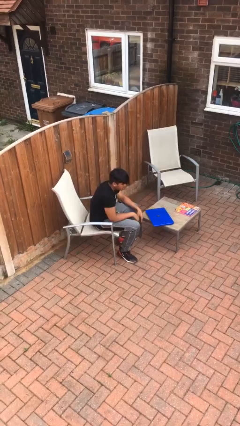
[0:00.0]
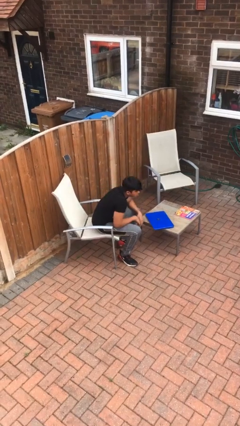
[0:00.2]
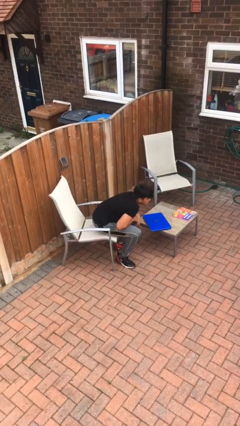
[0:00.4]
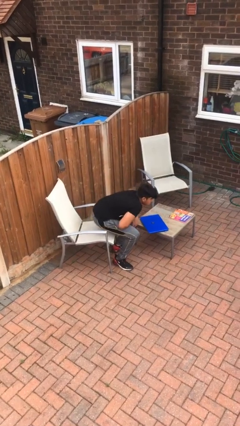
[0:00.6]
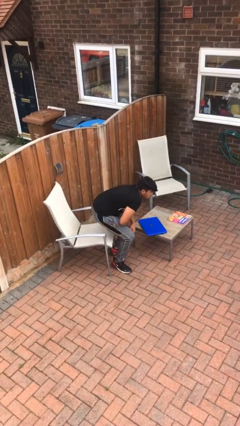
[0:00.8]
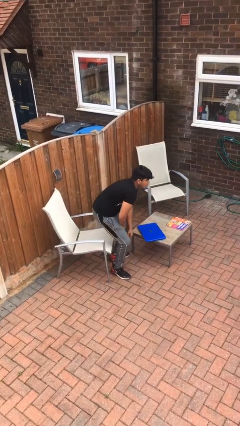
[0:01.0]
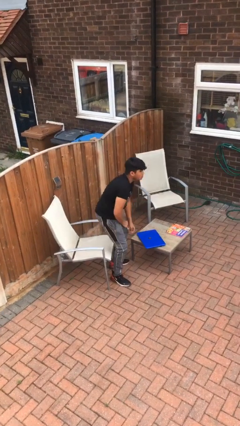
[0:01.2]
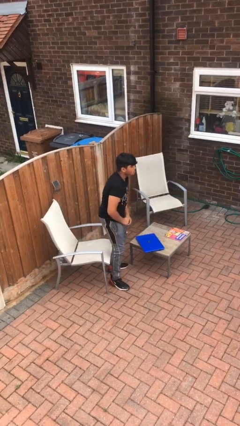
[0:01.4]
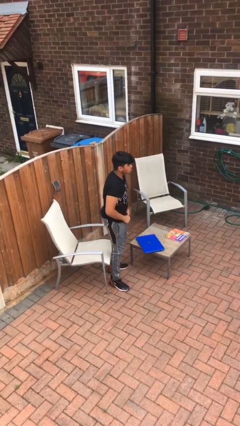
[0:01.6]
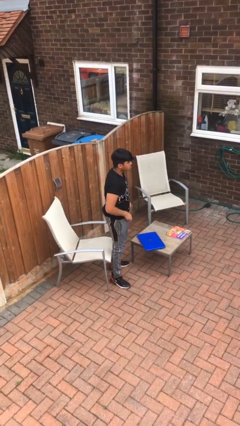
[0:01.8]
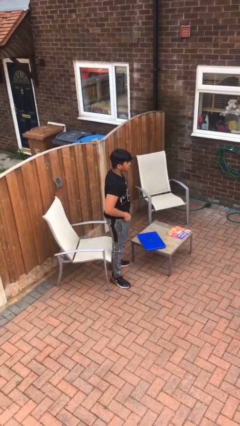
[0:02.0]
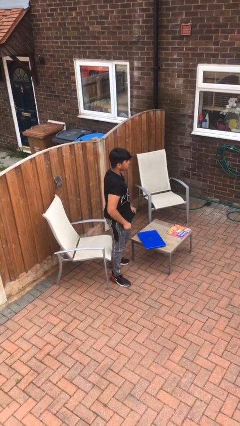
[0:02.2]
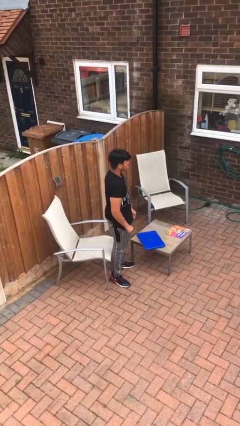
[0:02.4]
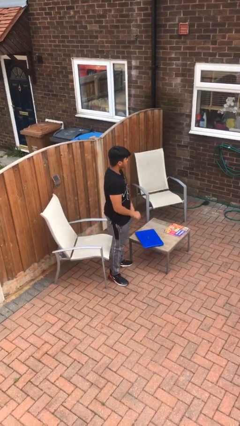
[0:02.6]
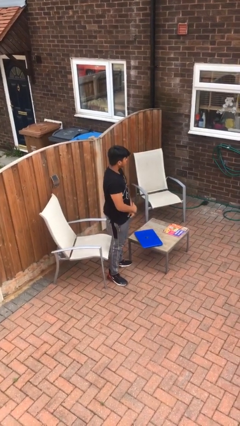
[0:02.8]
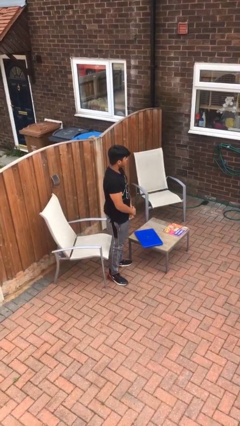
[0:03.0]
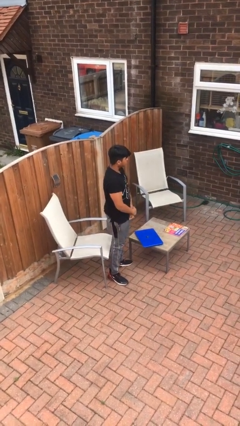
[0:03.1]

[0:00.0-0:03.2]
person stands up

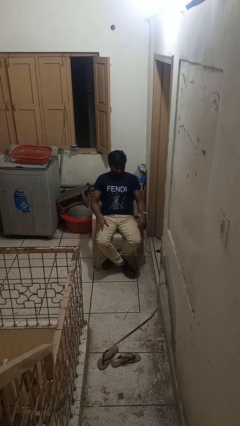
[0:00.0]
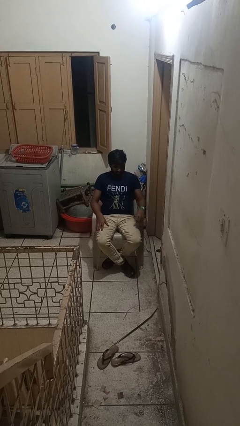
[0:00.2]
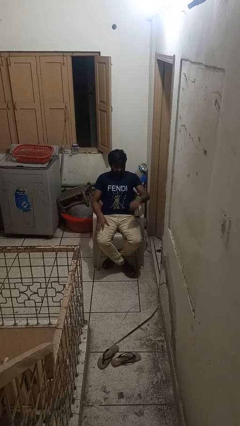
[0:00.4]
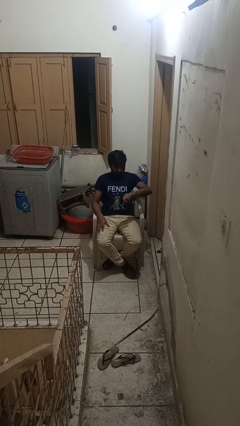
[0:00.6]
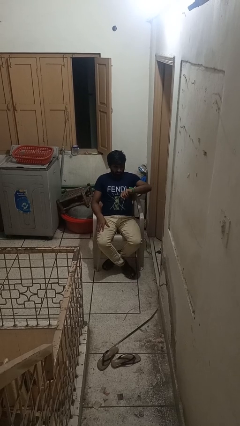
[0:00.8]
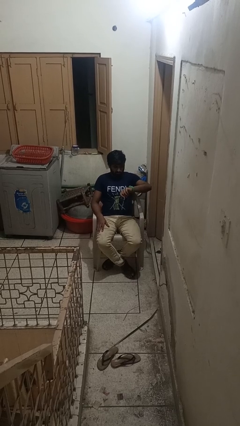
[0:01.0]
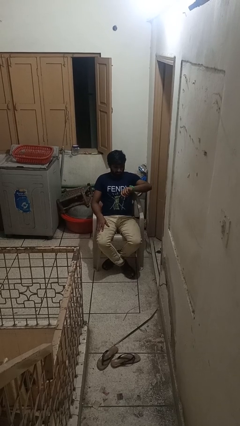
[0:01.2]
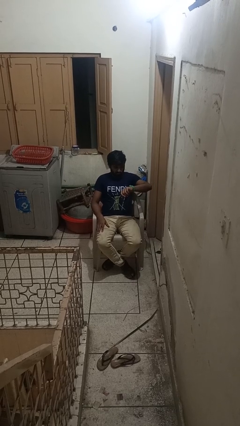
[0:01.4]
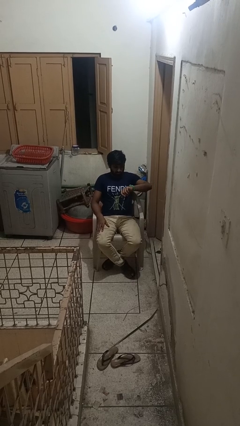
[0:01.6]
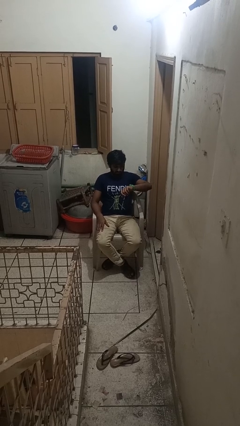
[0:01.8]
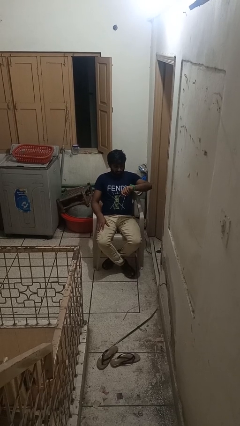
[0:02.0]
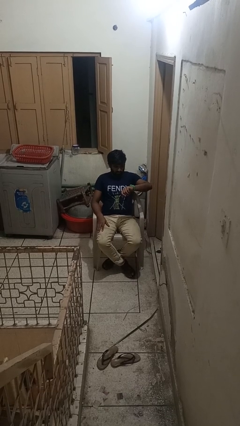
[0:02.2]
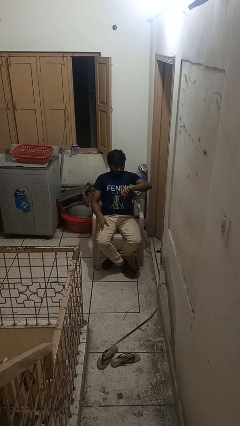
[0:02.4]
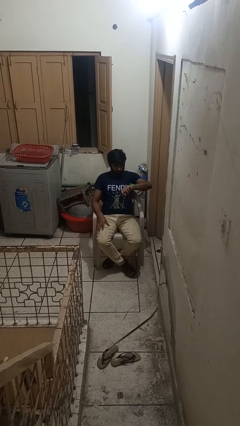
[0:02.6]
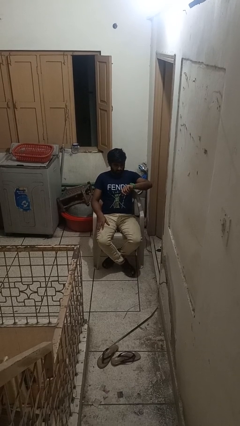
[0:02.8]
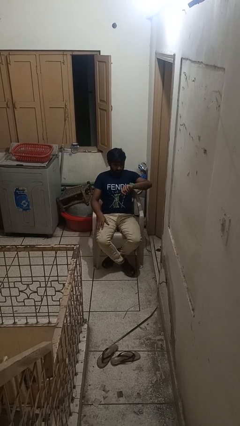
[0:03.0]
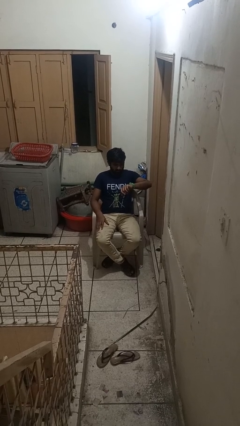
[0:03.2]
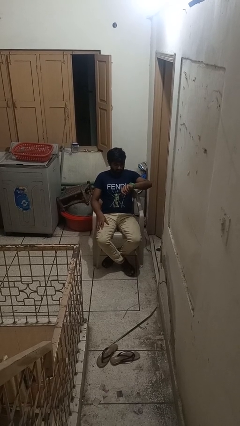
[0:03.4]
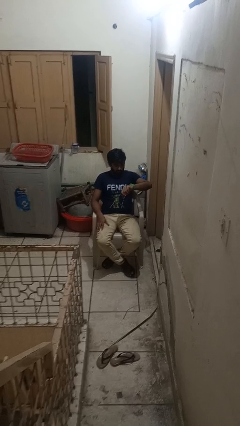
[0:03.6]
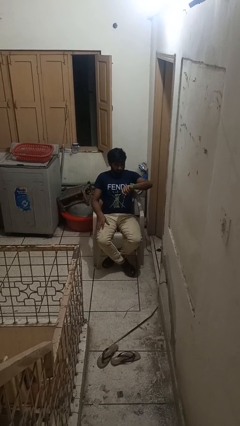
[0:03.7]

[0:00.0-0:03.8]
person looks at wristwatch

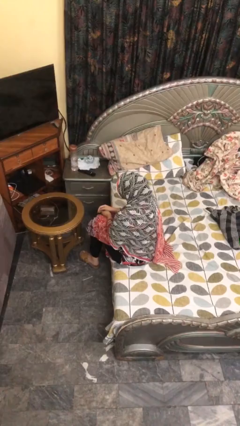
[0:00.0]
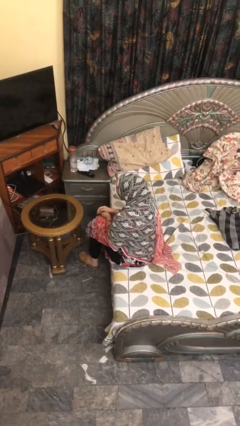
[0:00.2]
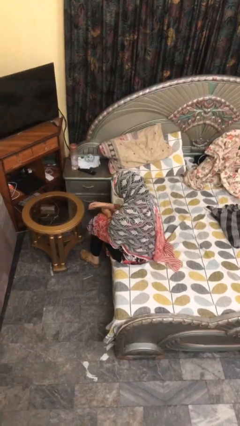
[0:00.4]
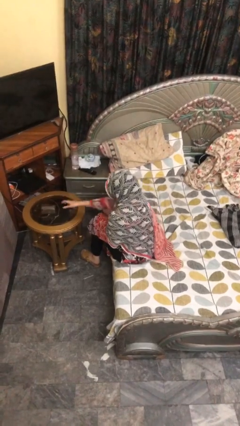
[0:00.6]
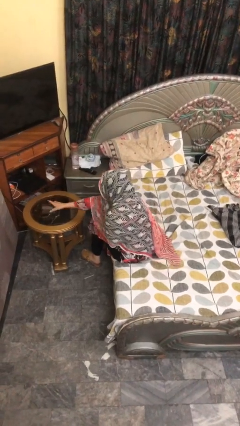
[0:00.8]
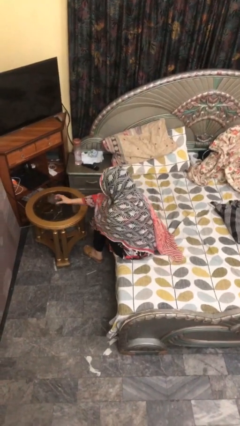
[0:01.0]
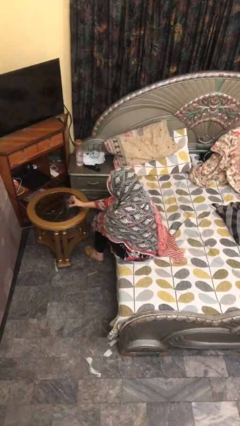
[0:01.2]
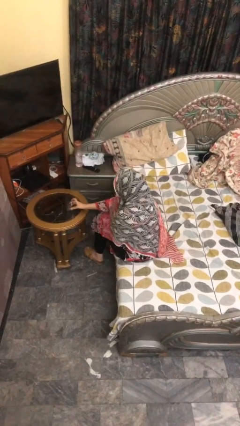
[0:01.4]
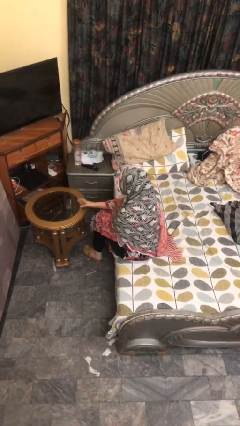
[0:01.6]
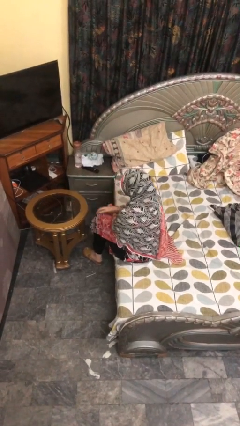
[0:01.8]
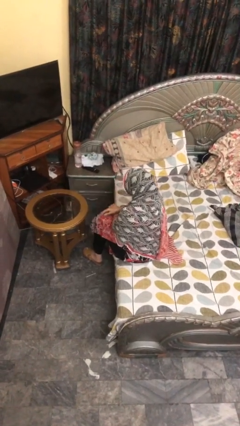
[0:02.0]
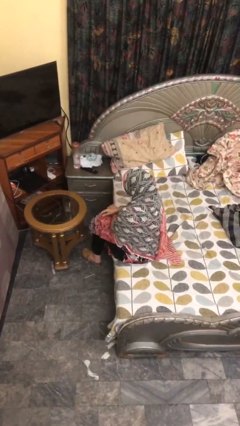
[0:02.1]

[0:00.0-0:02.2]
person sets upright glass

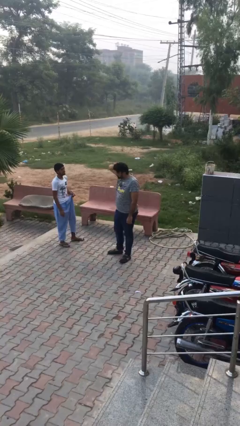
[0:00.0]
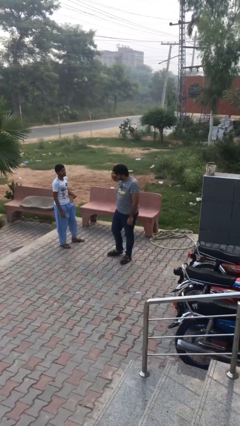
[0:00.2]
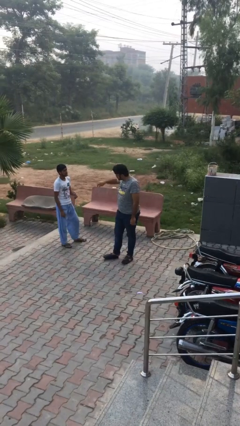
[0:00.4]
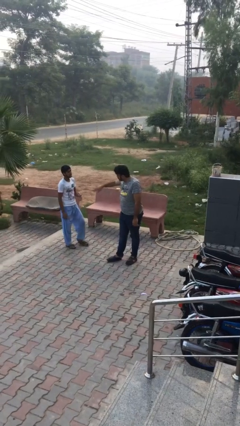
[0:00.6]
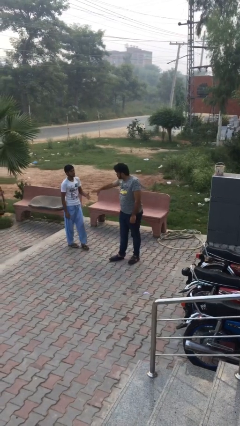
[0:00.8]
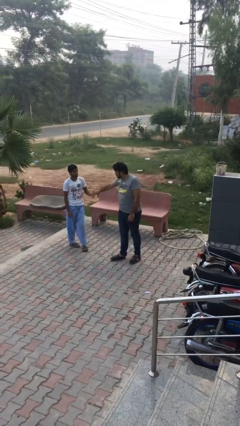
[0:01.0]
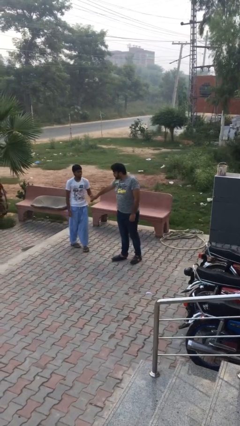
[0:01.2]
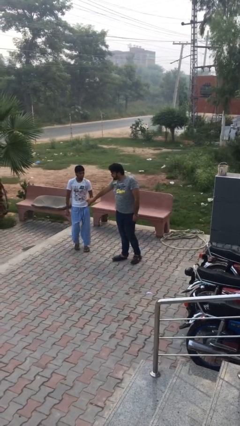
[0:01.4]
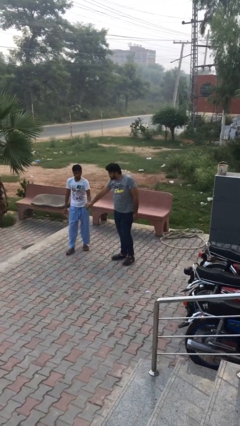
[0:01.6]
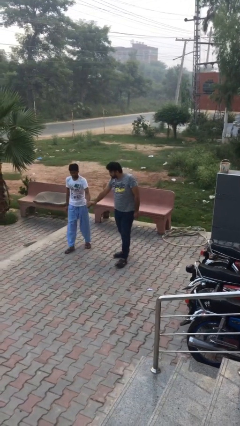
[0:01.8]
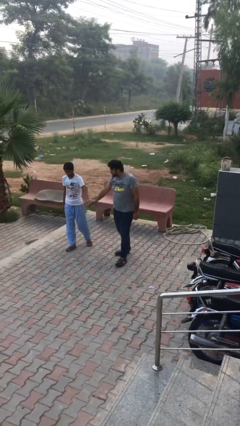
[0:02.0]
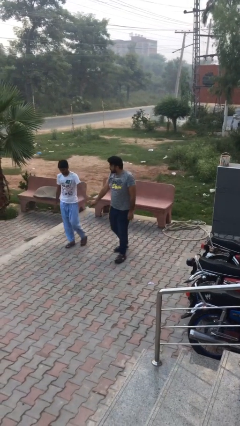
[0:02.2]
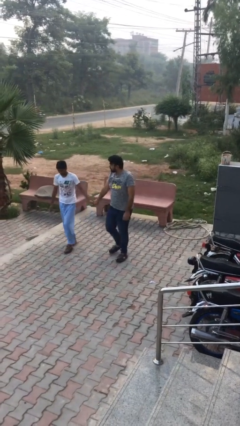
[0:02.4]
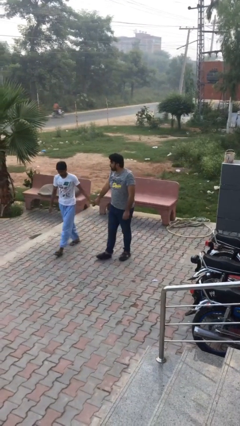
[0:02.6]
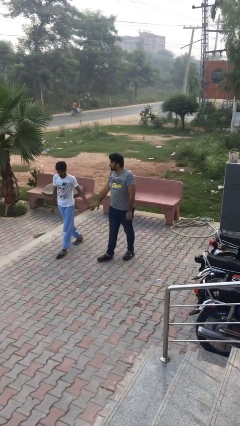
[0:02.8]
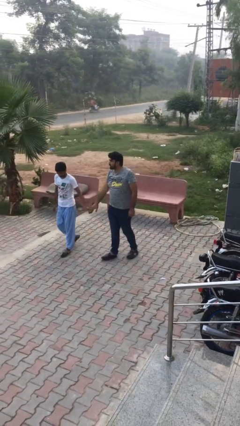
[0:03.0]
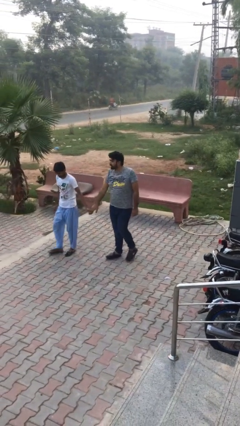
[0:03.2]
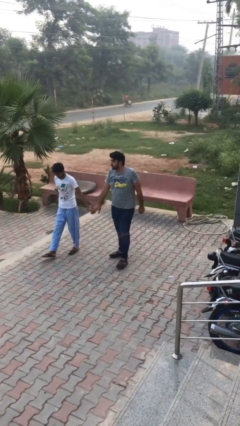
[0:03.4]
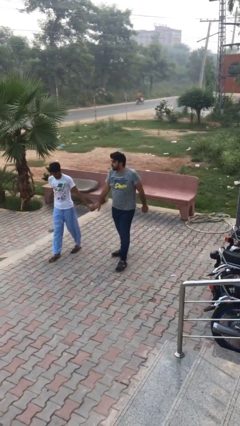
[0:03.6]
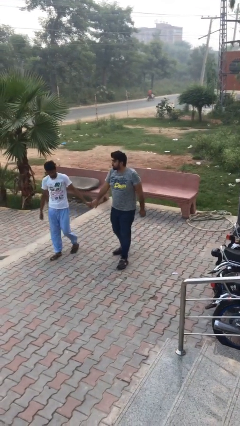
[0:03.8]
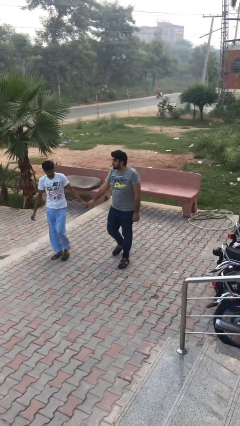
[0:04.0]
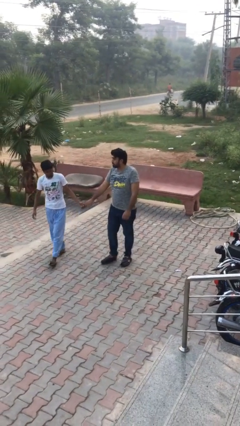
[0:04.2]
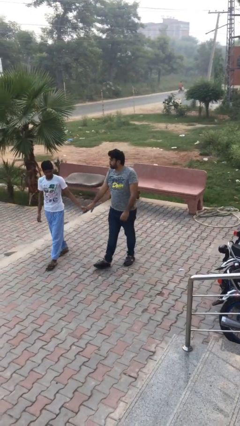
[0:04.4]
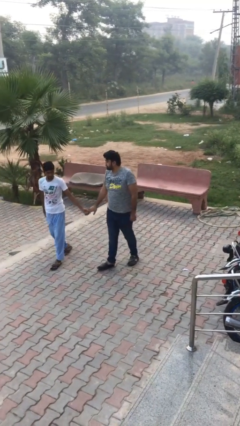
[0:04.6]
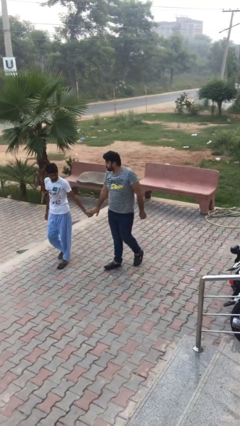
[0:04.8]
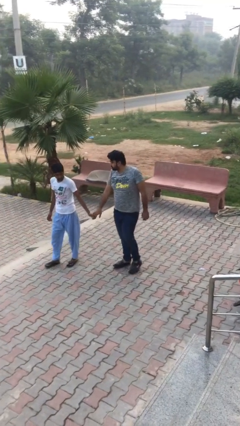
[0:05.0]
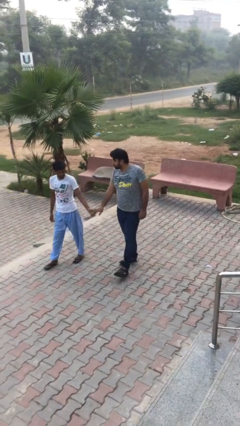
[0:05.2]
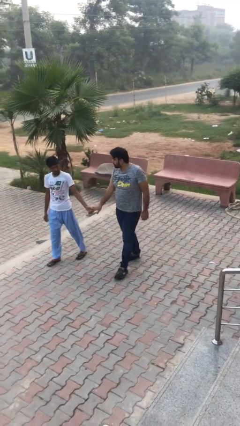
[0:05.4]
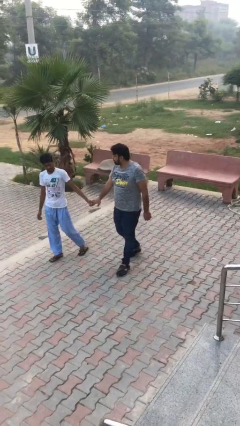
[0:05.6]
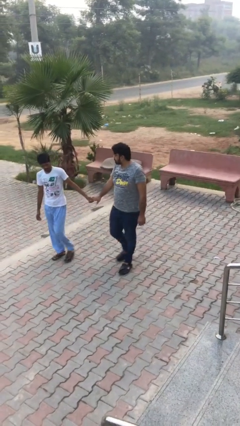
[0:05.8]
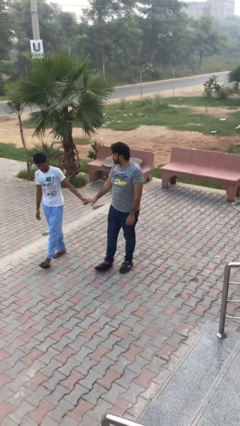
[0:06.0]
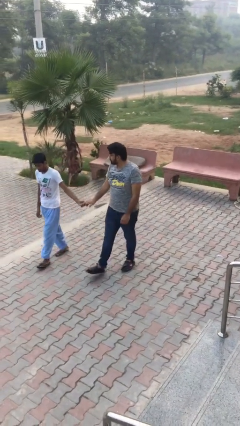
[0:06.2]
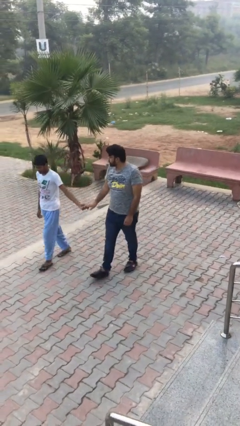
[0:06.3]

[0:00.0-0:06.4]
person holds hand

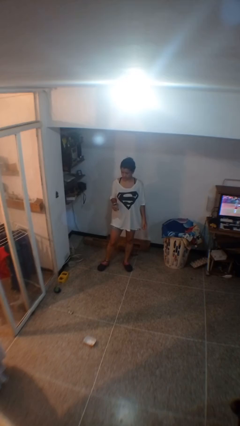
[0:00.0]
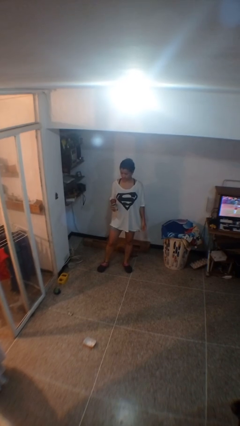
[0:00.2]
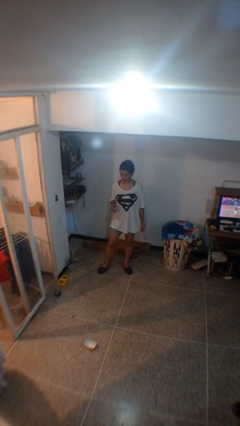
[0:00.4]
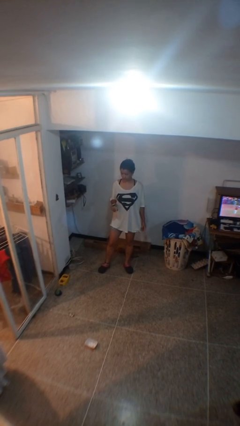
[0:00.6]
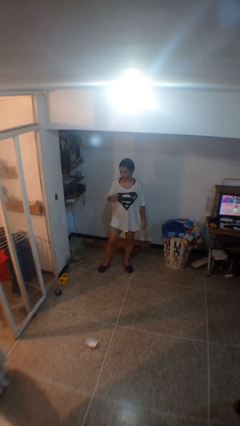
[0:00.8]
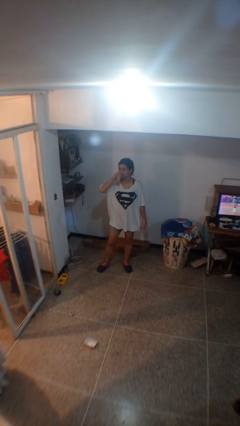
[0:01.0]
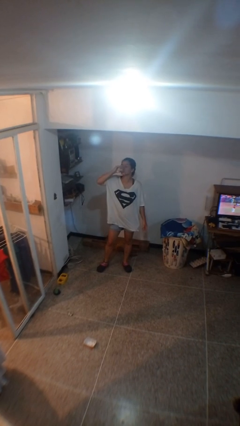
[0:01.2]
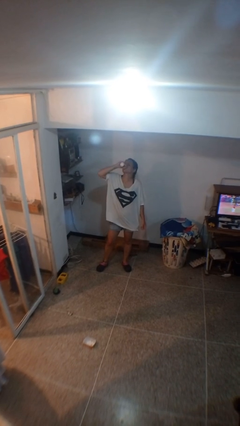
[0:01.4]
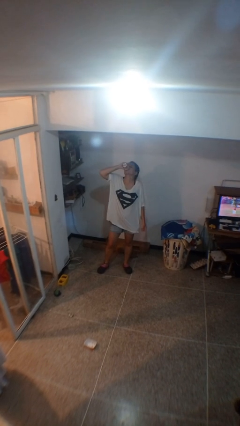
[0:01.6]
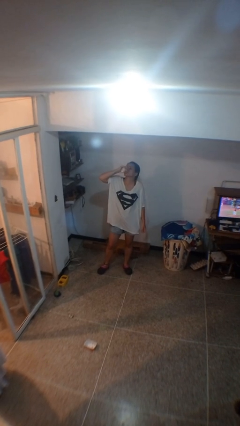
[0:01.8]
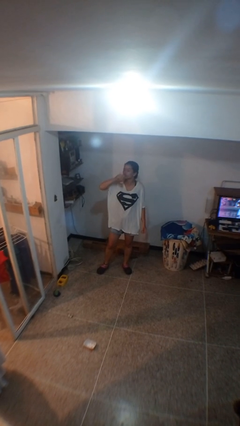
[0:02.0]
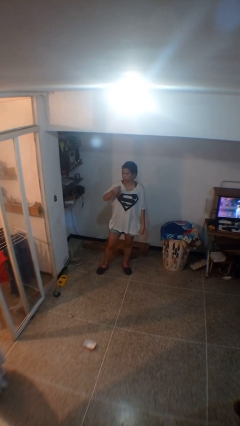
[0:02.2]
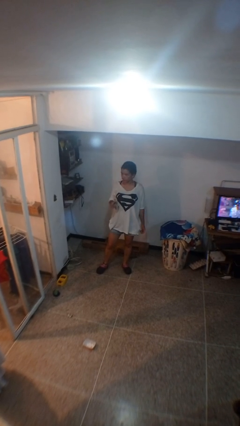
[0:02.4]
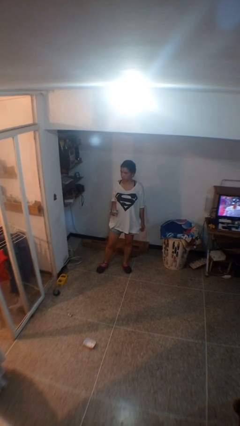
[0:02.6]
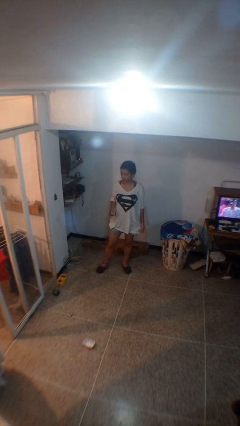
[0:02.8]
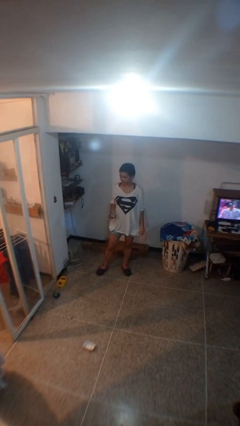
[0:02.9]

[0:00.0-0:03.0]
person drinks from beverage can
